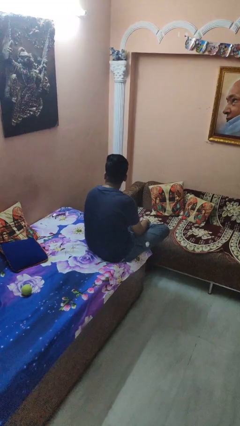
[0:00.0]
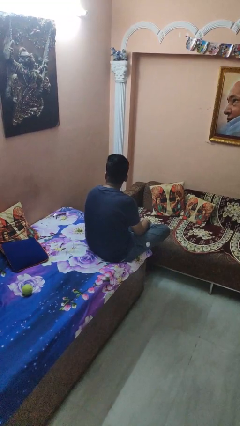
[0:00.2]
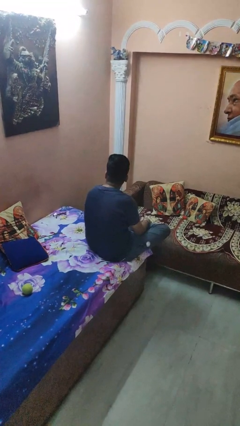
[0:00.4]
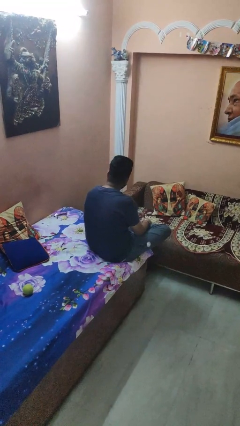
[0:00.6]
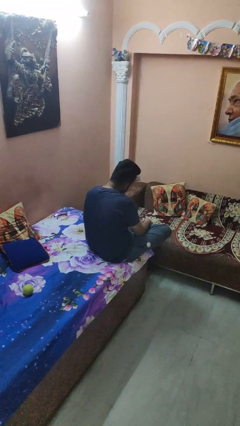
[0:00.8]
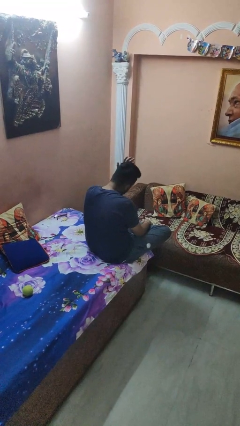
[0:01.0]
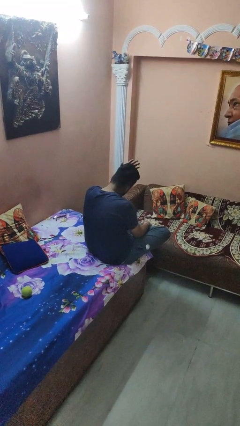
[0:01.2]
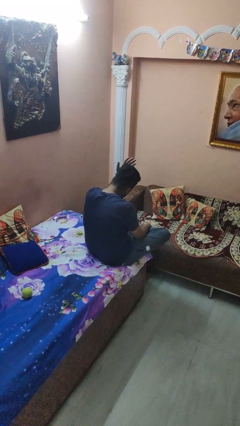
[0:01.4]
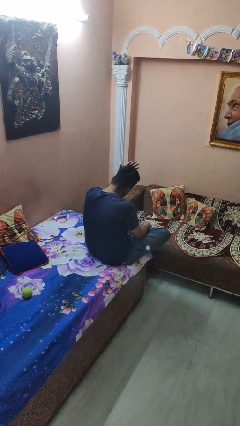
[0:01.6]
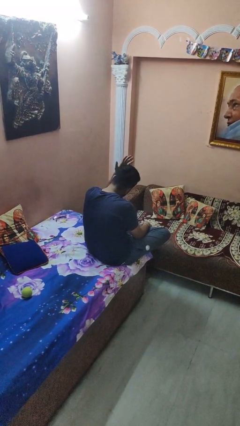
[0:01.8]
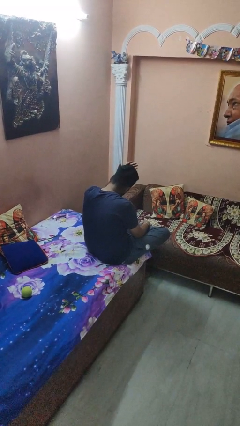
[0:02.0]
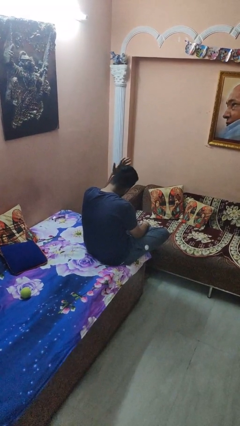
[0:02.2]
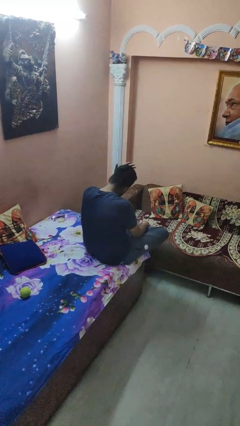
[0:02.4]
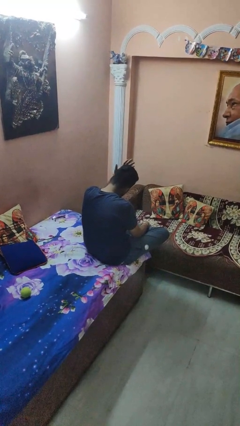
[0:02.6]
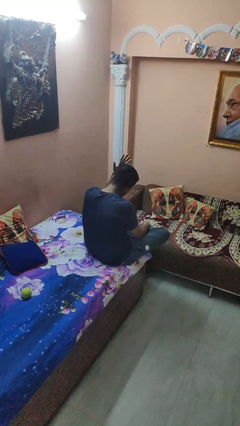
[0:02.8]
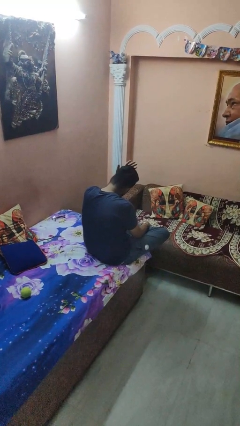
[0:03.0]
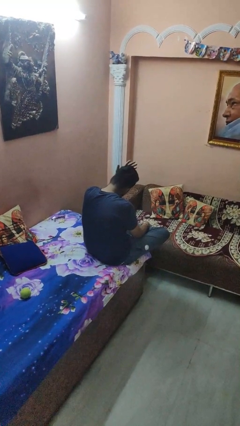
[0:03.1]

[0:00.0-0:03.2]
person pats head

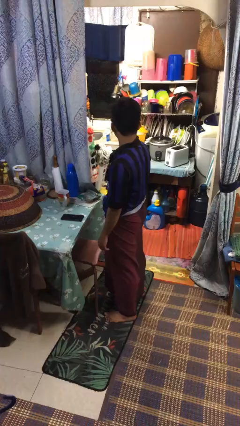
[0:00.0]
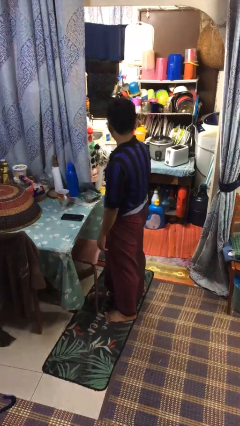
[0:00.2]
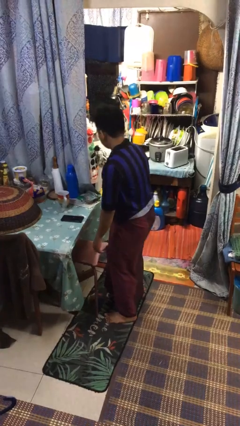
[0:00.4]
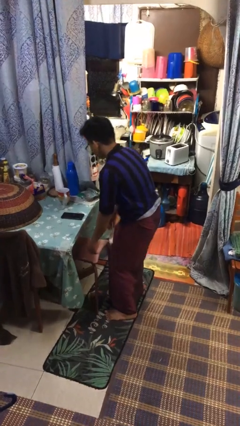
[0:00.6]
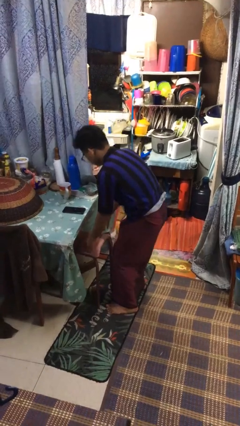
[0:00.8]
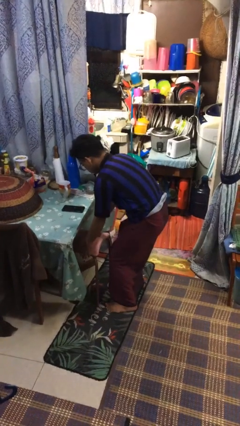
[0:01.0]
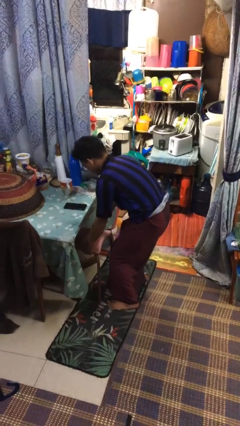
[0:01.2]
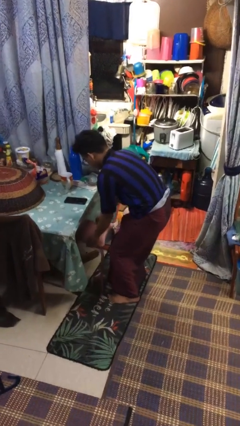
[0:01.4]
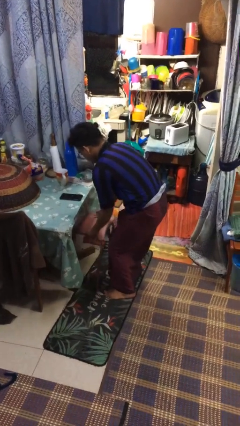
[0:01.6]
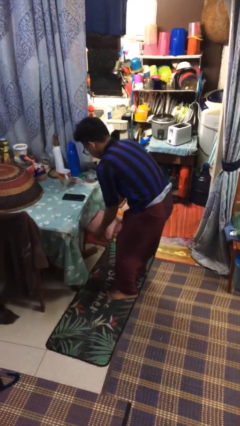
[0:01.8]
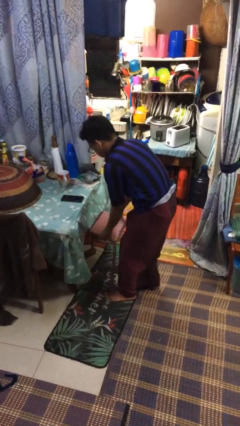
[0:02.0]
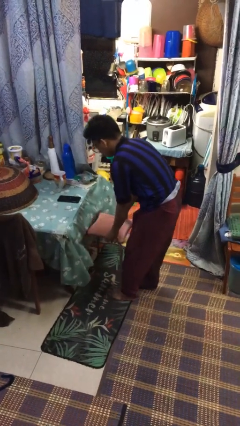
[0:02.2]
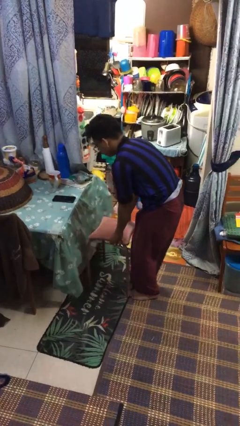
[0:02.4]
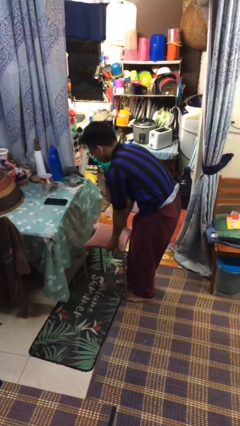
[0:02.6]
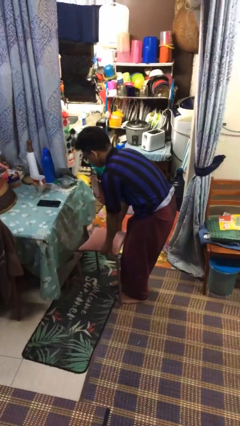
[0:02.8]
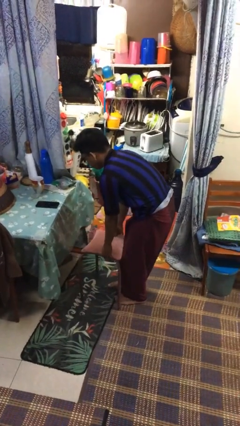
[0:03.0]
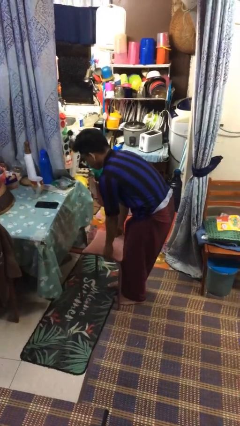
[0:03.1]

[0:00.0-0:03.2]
person pulls out chair

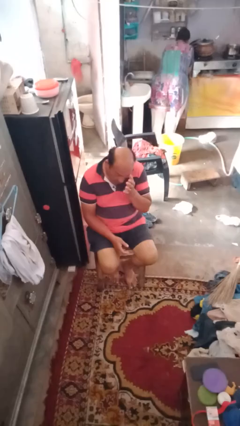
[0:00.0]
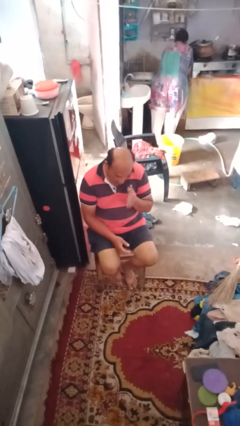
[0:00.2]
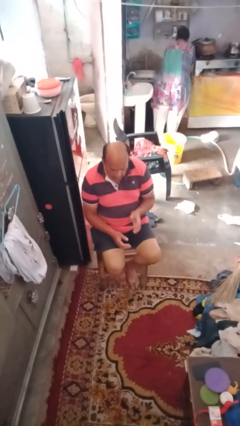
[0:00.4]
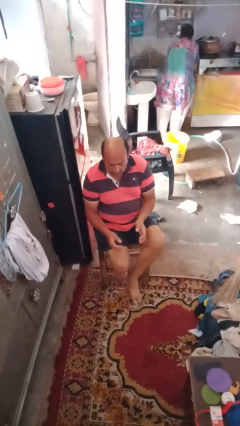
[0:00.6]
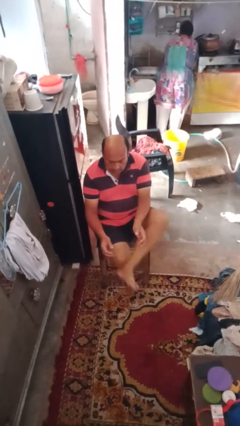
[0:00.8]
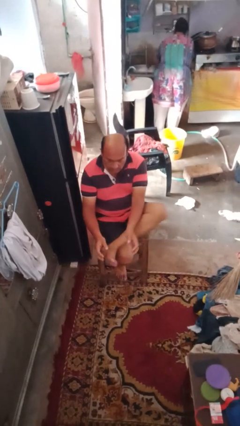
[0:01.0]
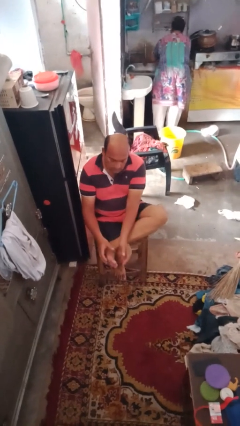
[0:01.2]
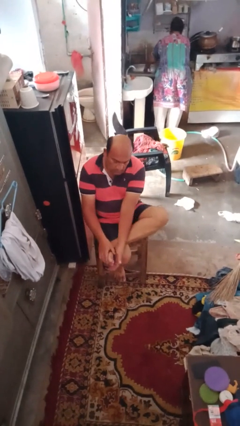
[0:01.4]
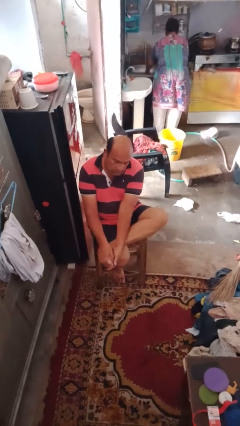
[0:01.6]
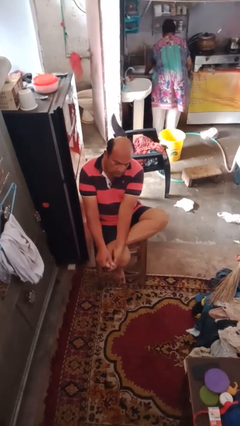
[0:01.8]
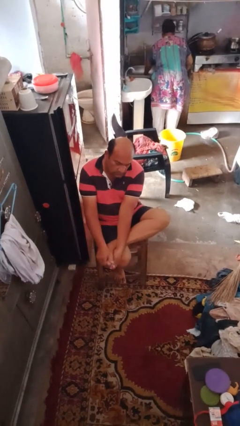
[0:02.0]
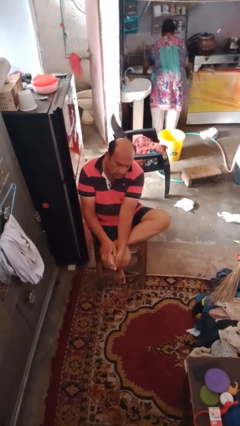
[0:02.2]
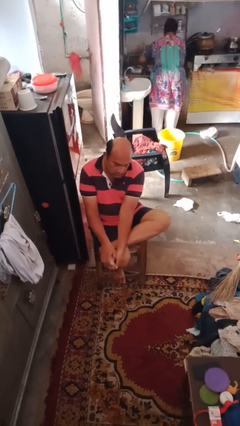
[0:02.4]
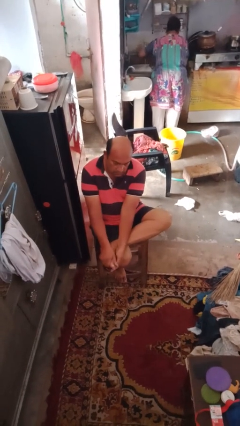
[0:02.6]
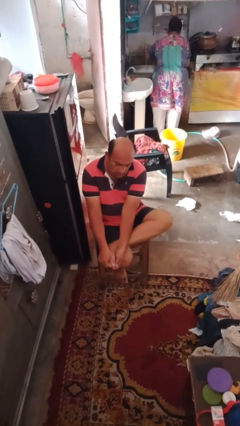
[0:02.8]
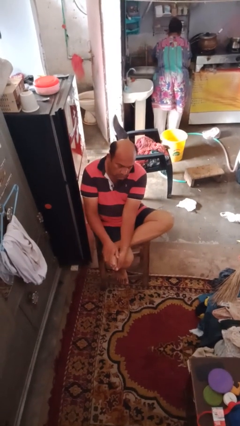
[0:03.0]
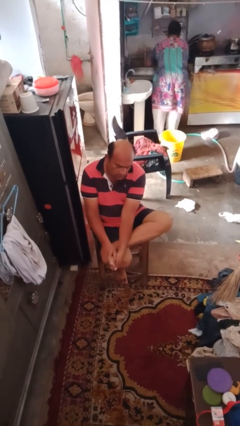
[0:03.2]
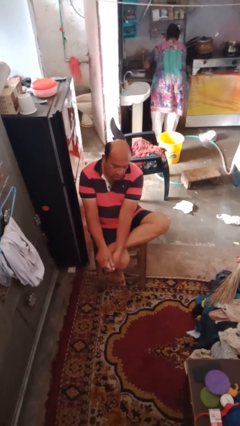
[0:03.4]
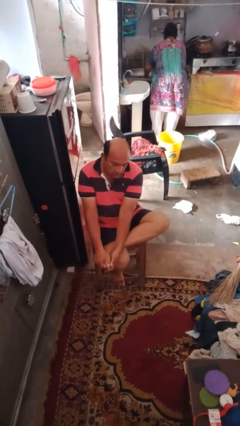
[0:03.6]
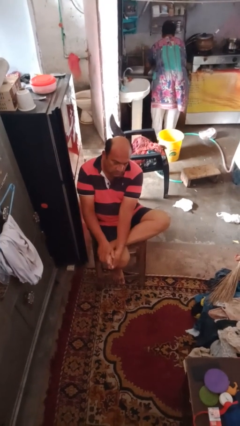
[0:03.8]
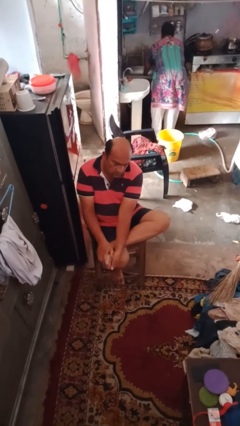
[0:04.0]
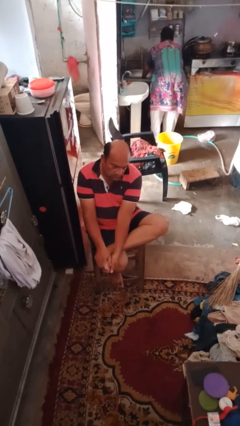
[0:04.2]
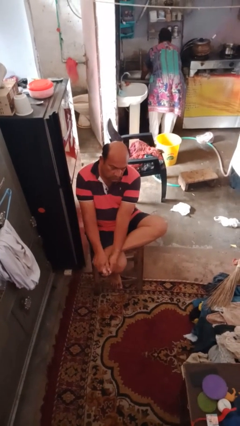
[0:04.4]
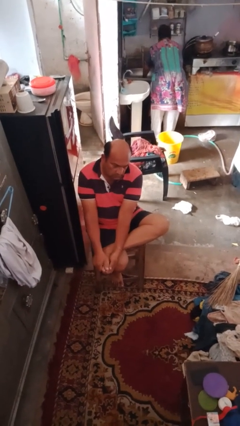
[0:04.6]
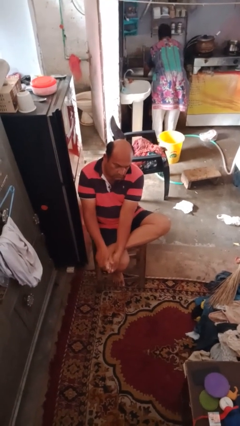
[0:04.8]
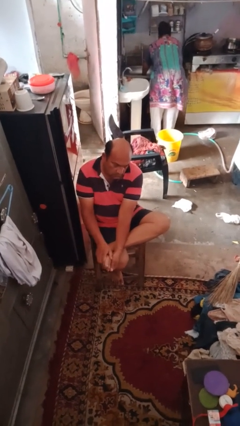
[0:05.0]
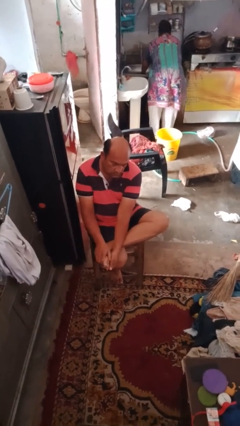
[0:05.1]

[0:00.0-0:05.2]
person rubs foot

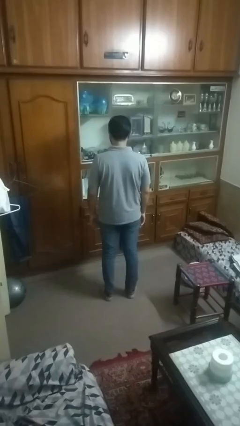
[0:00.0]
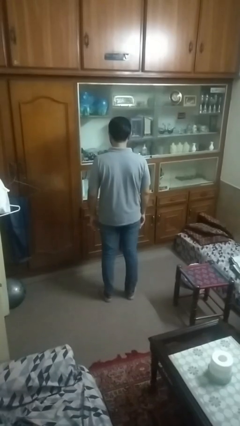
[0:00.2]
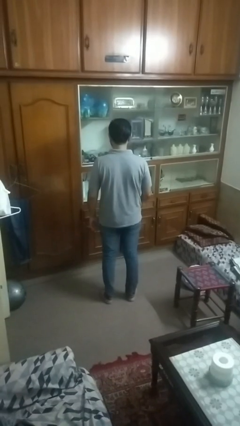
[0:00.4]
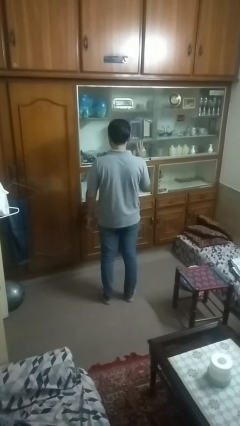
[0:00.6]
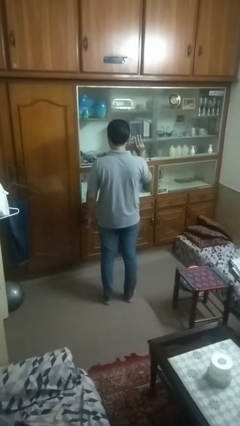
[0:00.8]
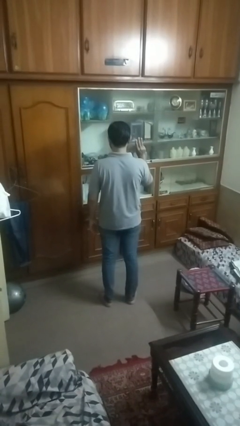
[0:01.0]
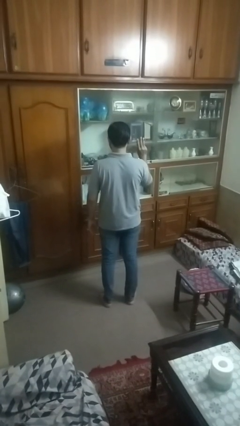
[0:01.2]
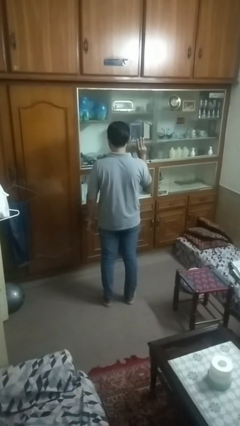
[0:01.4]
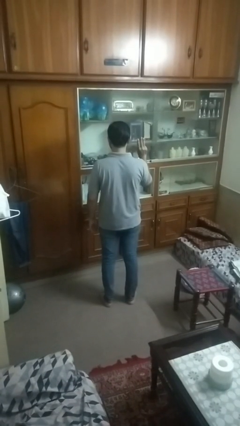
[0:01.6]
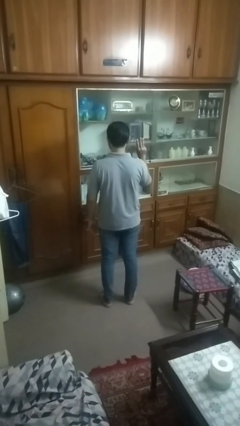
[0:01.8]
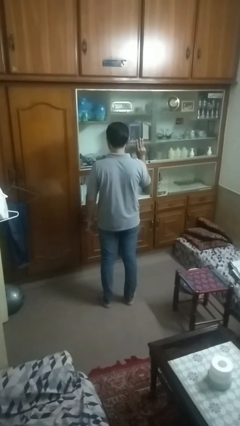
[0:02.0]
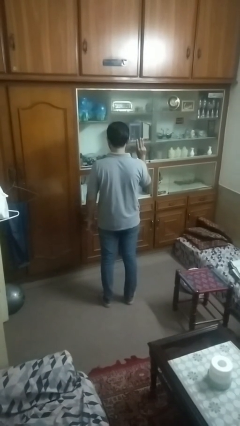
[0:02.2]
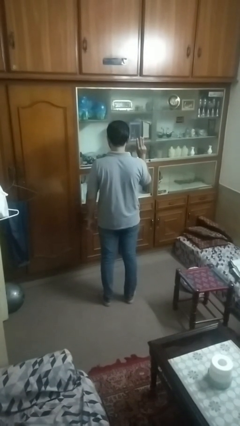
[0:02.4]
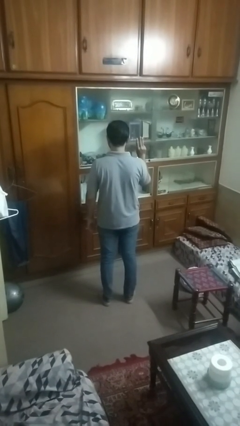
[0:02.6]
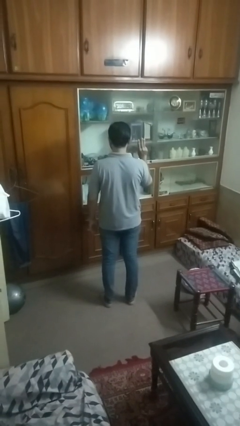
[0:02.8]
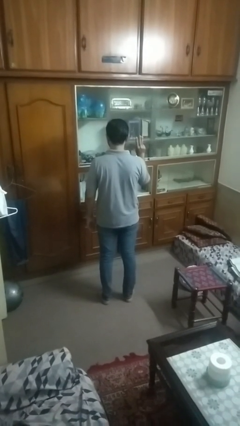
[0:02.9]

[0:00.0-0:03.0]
person gestures number three

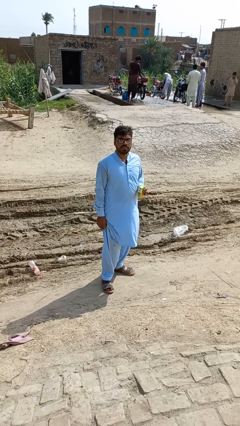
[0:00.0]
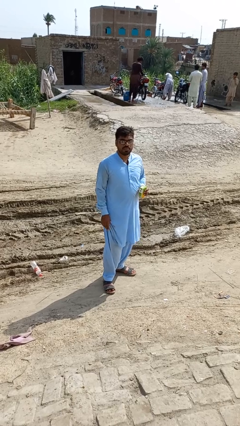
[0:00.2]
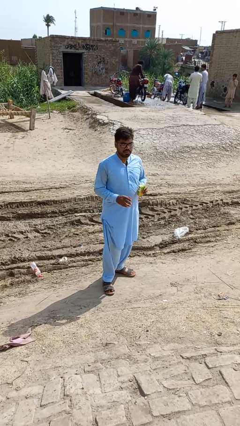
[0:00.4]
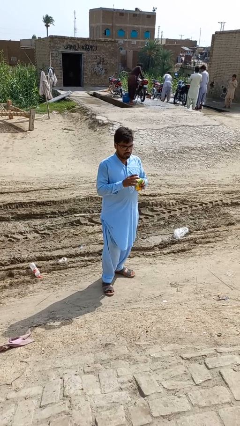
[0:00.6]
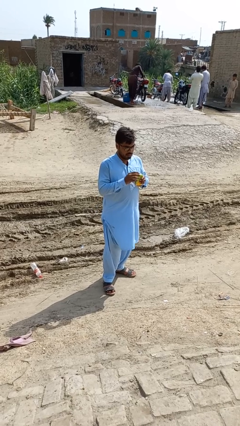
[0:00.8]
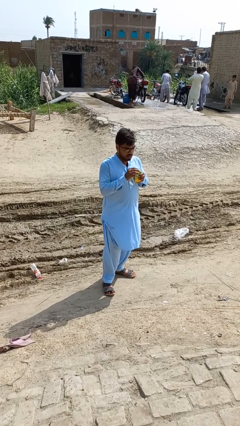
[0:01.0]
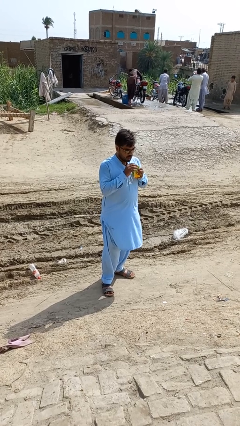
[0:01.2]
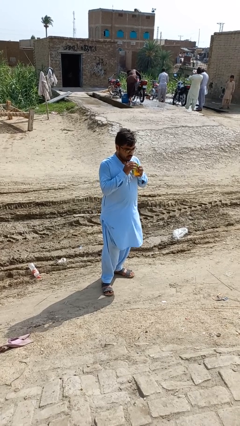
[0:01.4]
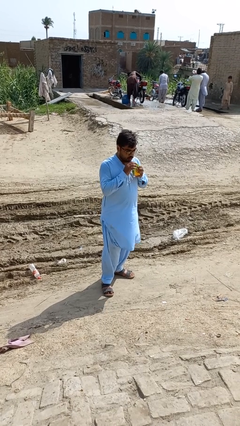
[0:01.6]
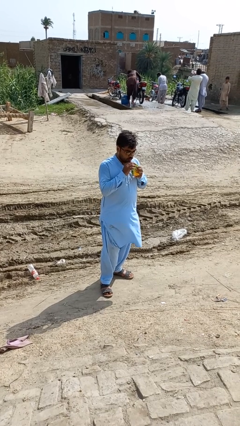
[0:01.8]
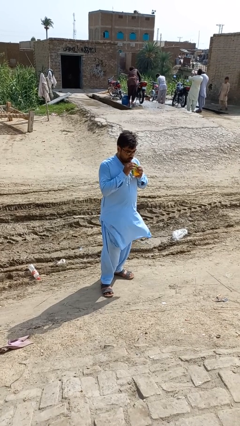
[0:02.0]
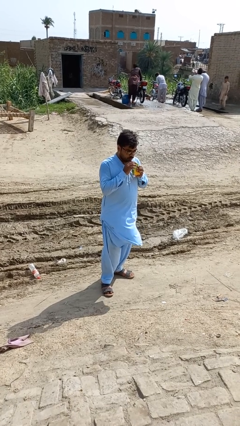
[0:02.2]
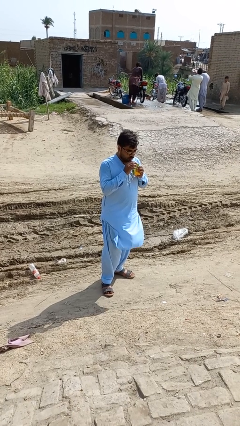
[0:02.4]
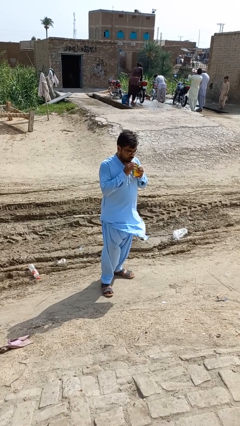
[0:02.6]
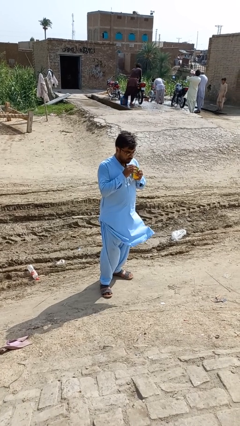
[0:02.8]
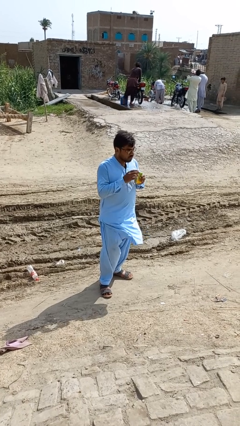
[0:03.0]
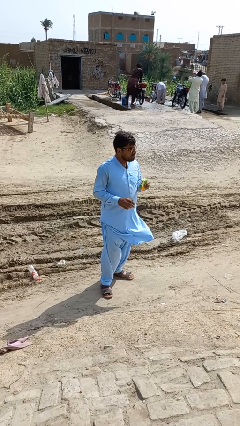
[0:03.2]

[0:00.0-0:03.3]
person drinks from straw
